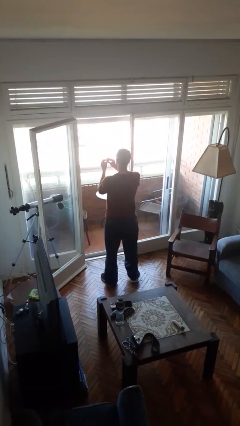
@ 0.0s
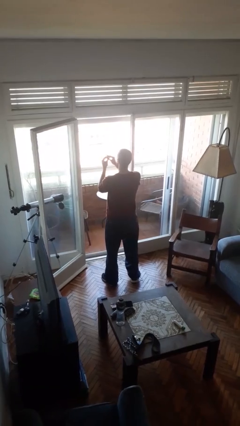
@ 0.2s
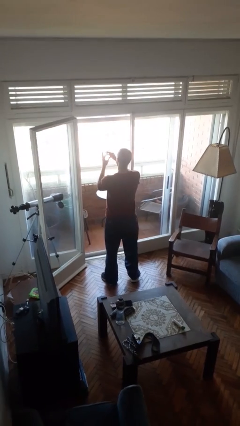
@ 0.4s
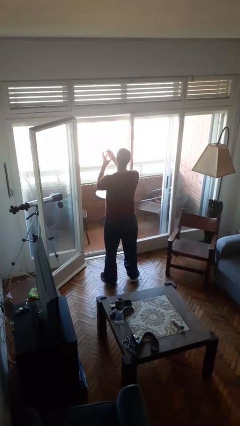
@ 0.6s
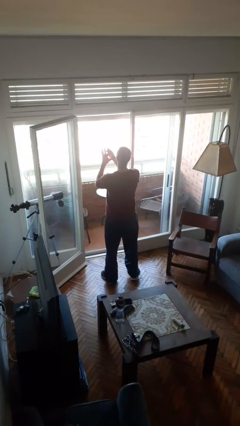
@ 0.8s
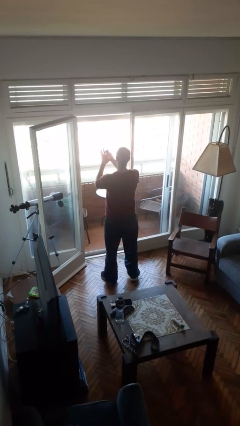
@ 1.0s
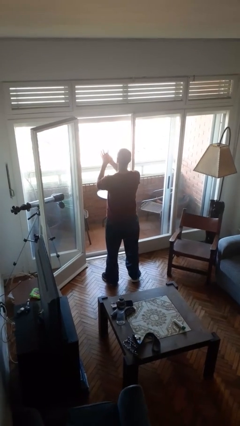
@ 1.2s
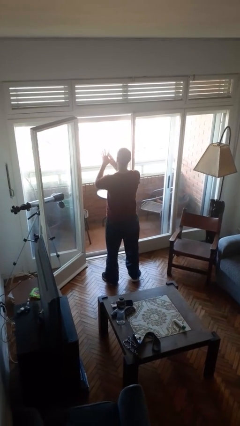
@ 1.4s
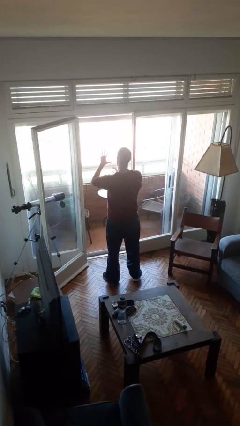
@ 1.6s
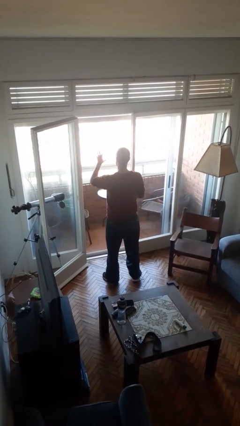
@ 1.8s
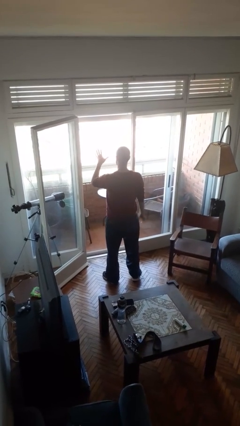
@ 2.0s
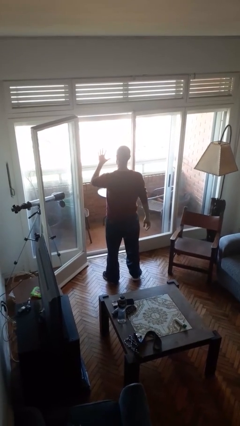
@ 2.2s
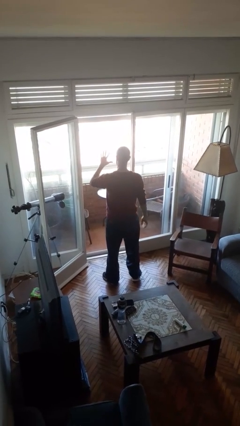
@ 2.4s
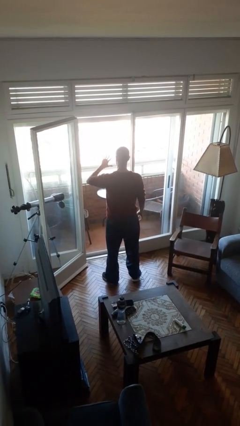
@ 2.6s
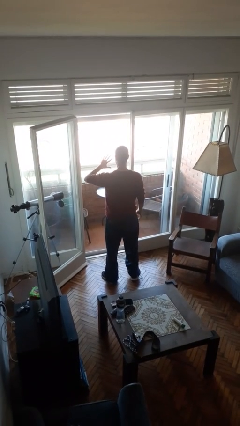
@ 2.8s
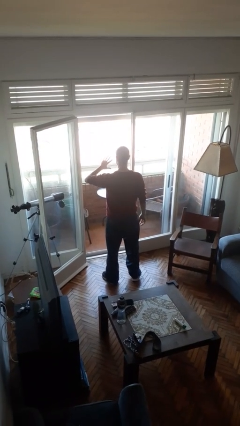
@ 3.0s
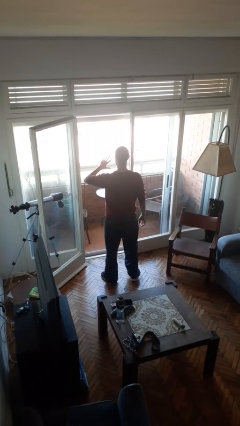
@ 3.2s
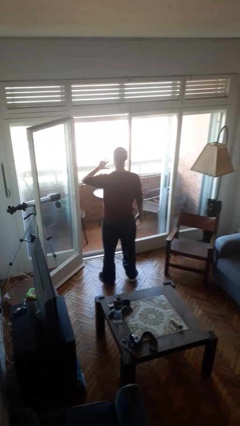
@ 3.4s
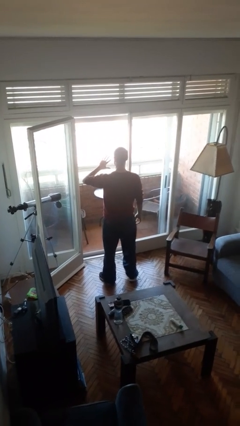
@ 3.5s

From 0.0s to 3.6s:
person puts on ring

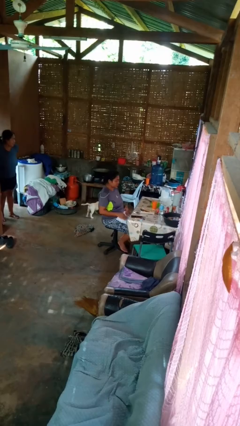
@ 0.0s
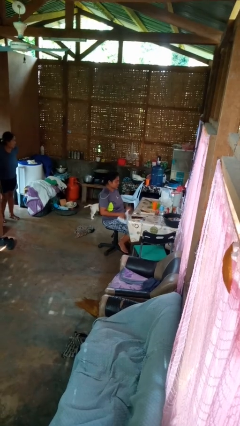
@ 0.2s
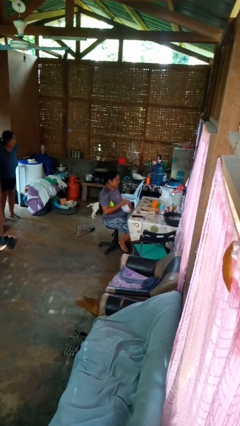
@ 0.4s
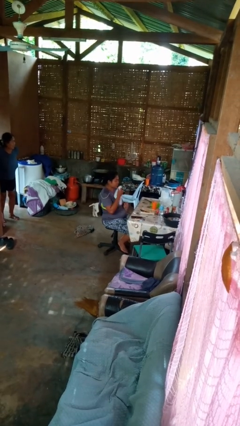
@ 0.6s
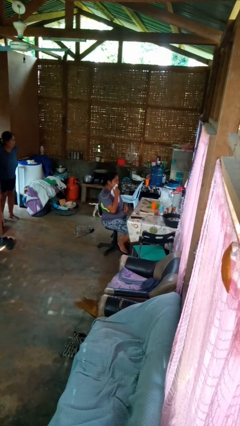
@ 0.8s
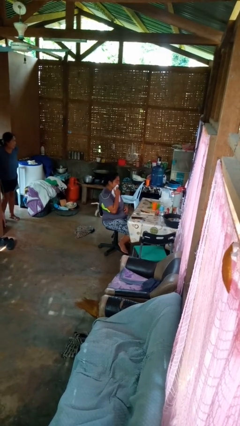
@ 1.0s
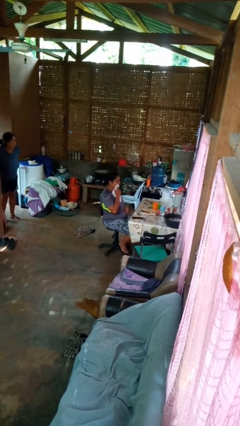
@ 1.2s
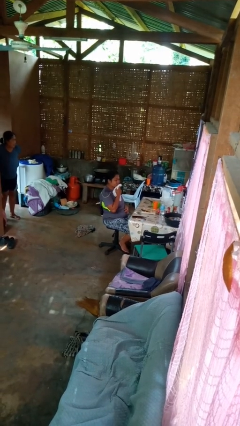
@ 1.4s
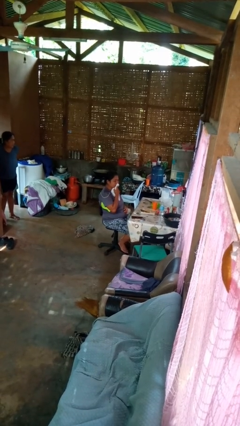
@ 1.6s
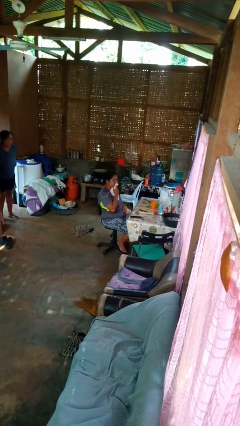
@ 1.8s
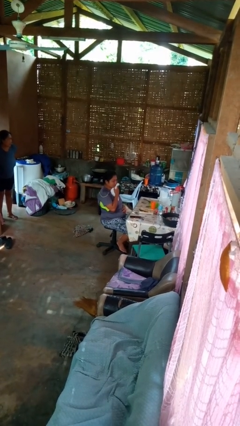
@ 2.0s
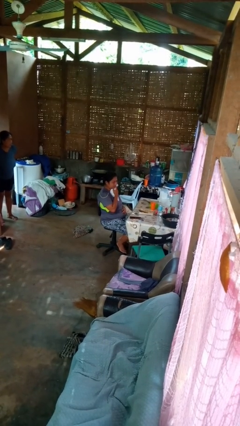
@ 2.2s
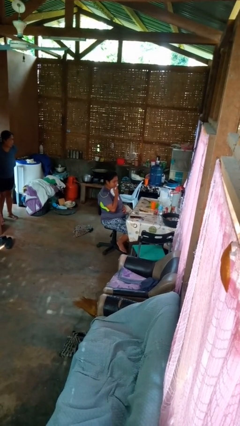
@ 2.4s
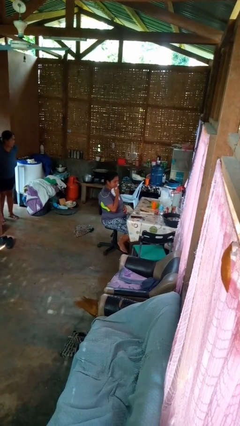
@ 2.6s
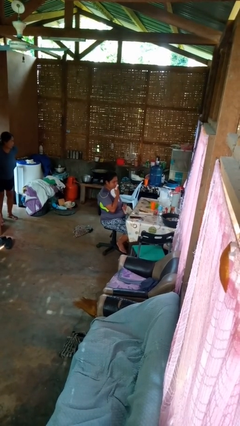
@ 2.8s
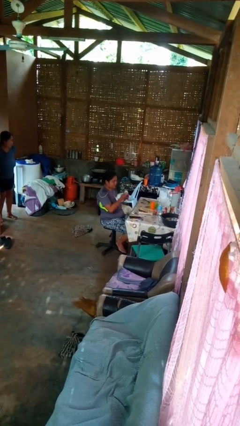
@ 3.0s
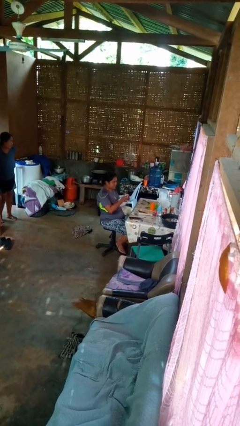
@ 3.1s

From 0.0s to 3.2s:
person wipes mouth with napkin

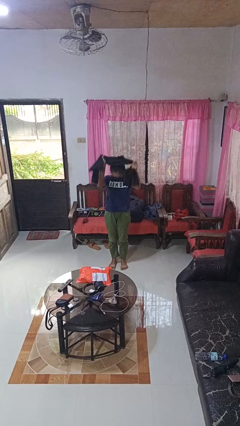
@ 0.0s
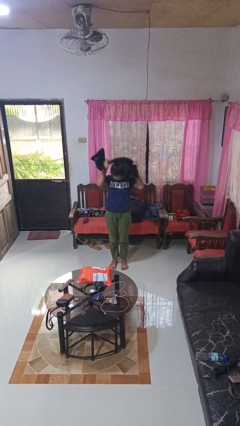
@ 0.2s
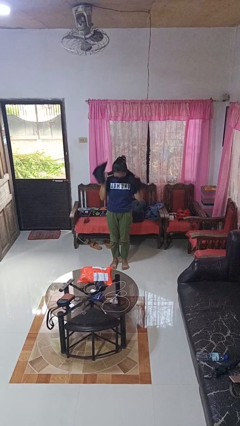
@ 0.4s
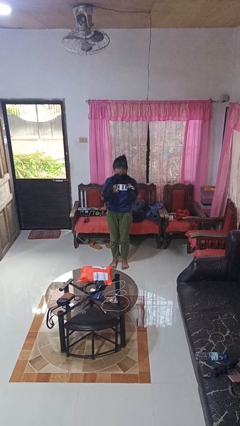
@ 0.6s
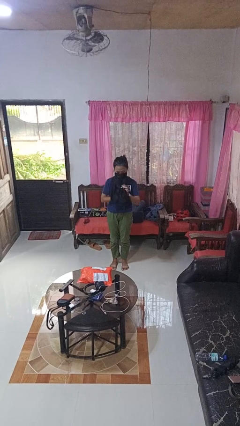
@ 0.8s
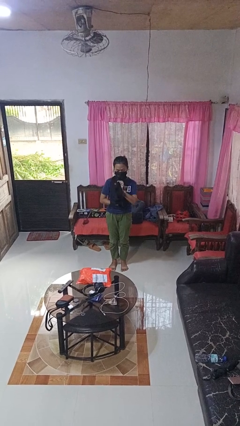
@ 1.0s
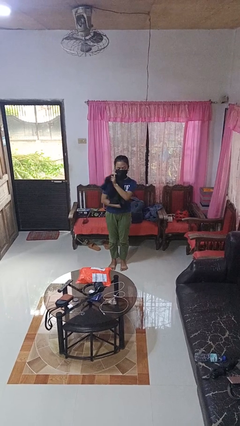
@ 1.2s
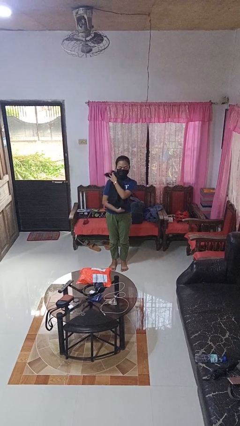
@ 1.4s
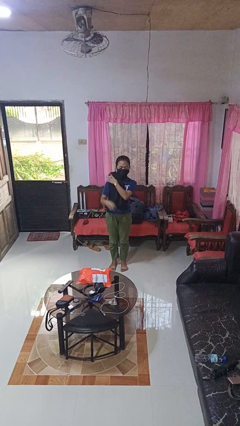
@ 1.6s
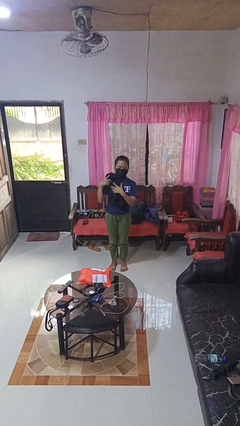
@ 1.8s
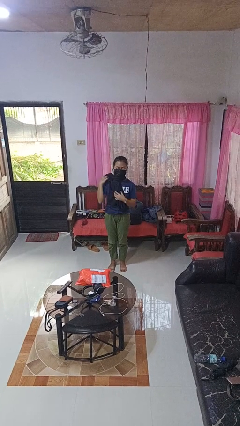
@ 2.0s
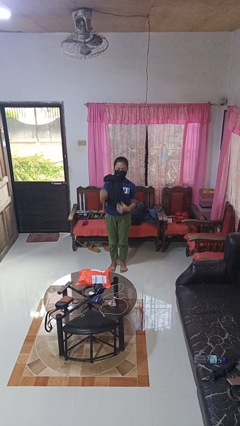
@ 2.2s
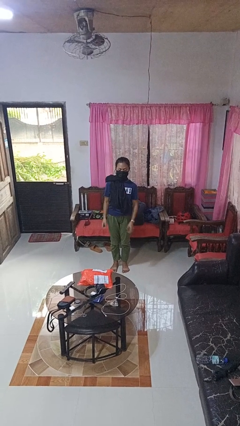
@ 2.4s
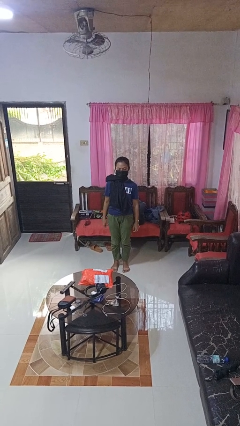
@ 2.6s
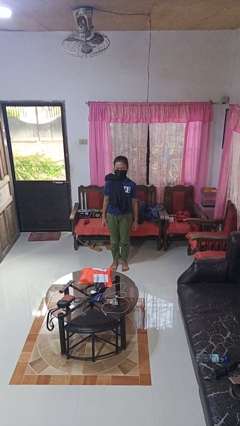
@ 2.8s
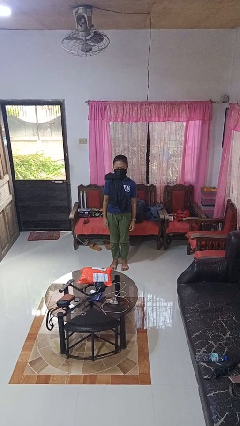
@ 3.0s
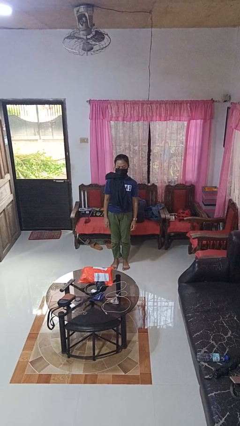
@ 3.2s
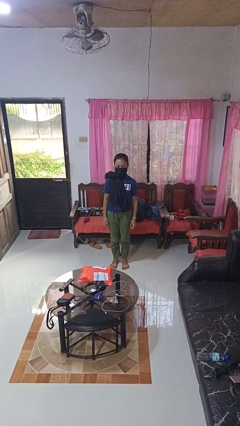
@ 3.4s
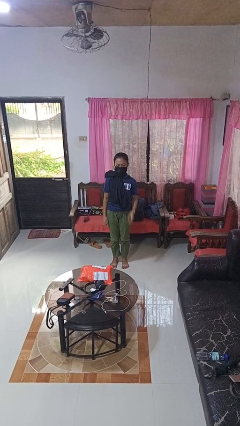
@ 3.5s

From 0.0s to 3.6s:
person puts on scarf

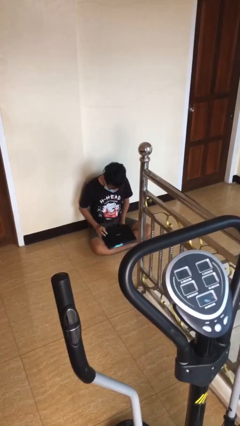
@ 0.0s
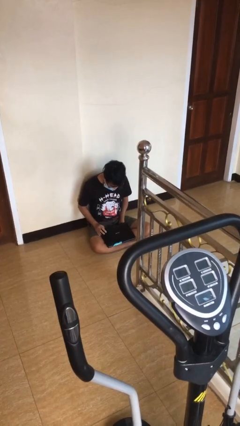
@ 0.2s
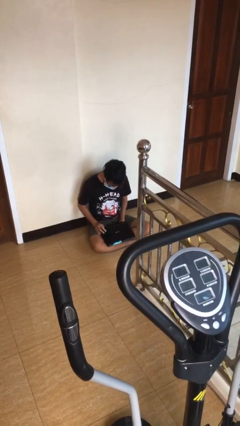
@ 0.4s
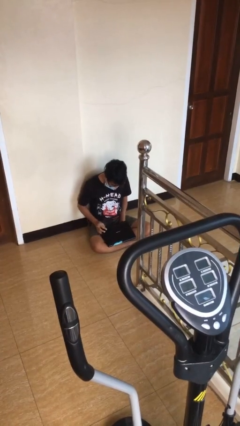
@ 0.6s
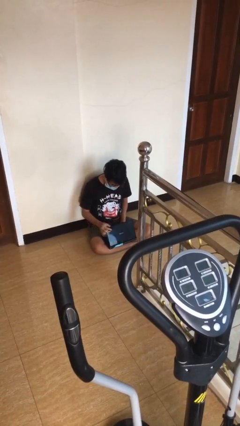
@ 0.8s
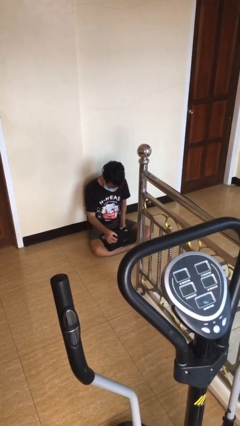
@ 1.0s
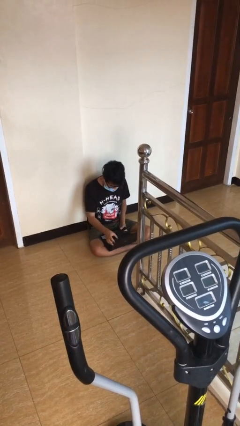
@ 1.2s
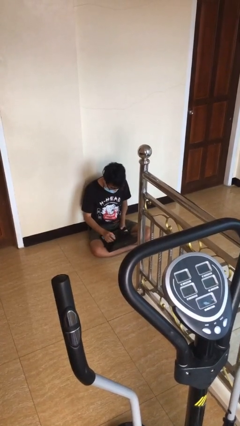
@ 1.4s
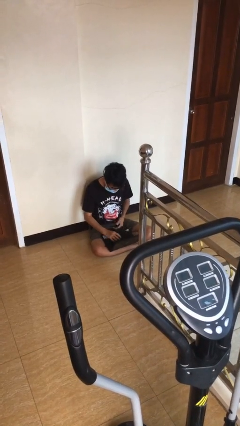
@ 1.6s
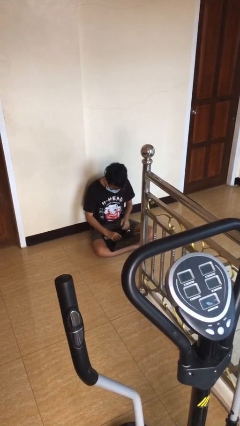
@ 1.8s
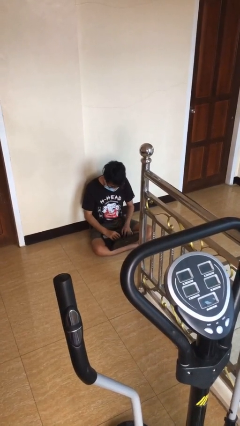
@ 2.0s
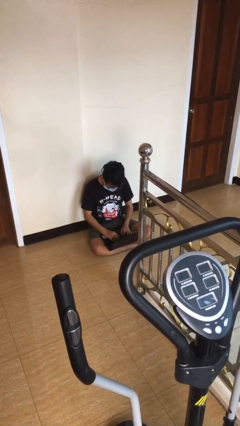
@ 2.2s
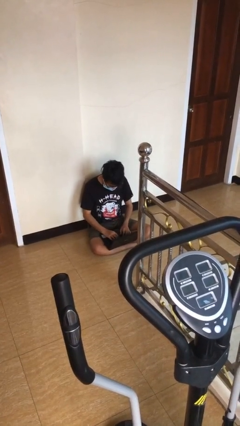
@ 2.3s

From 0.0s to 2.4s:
person interacts with laptop

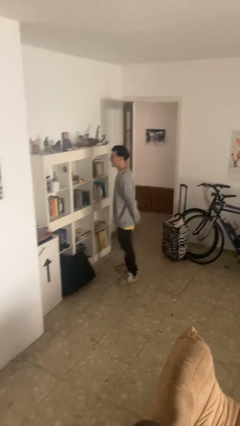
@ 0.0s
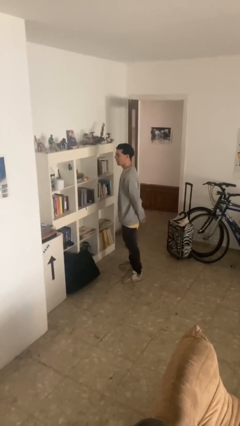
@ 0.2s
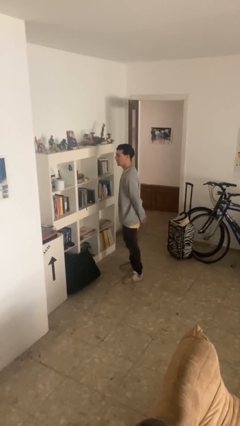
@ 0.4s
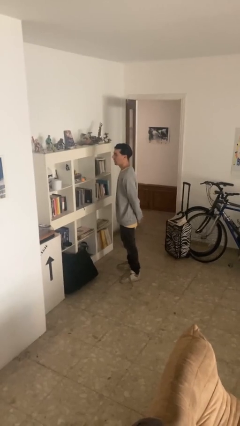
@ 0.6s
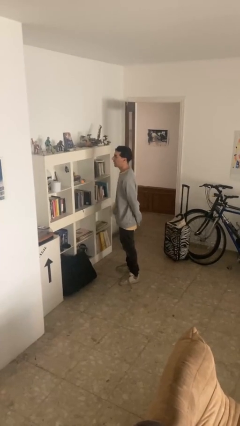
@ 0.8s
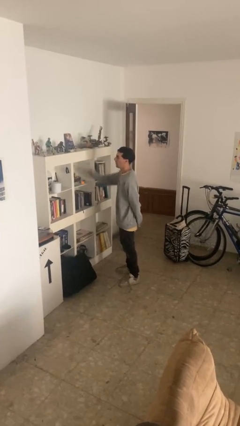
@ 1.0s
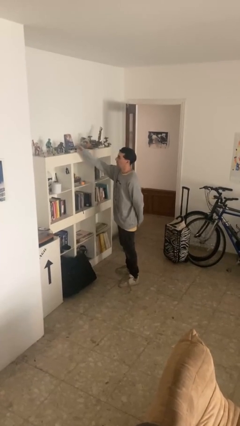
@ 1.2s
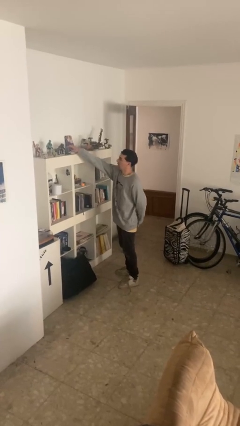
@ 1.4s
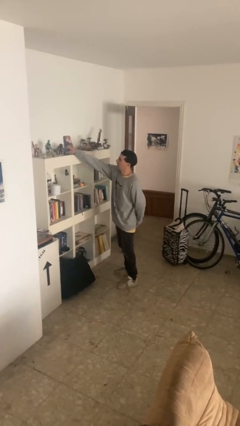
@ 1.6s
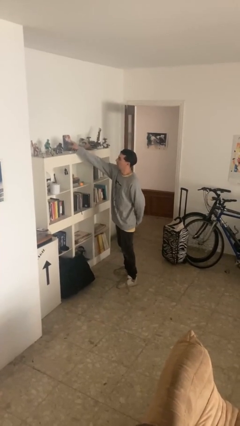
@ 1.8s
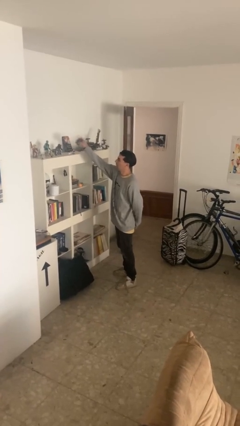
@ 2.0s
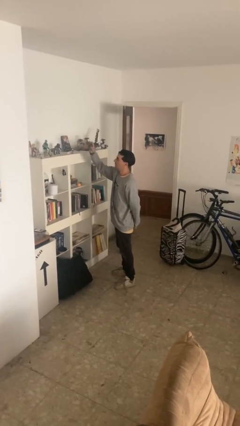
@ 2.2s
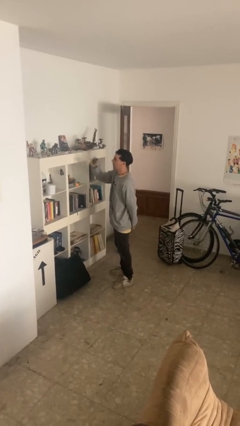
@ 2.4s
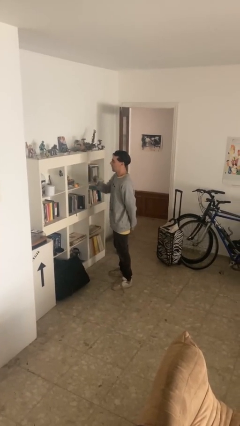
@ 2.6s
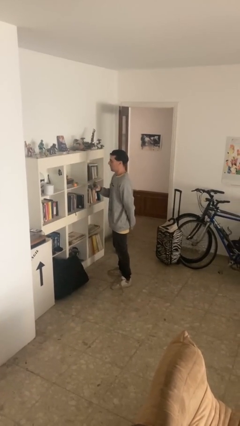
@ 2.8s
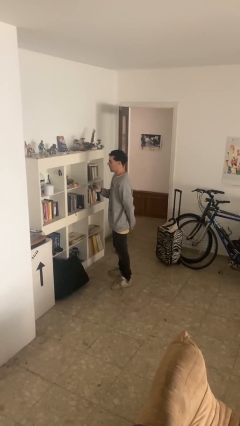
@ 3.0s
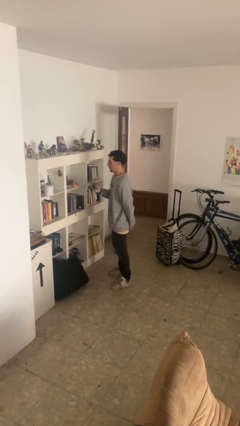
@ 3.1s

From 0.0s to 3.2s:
person picks up object from shelf

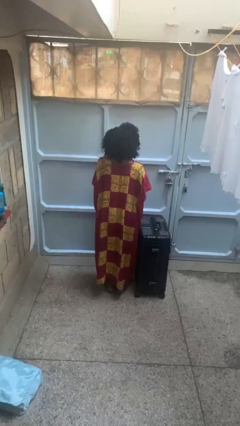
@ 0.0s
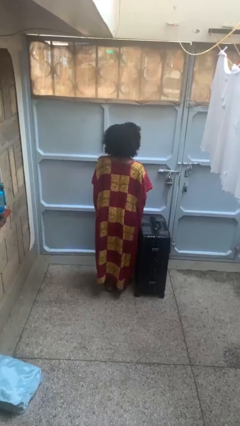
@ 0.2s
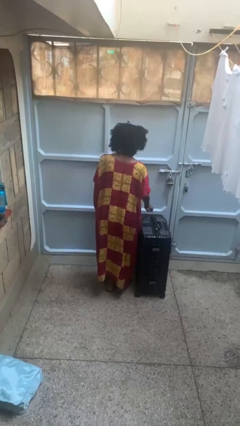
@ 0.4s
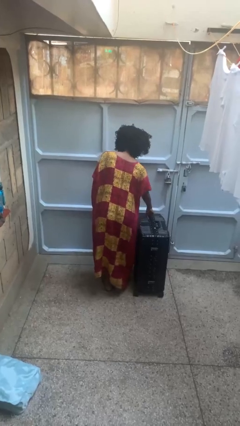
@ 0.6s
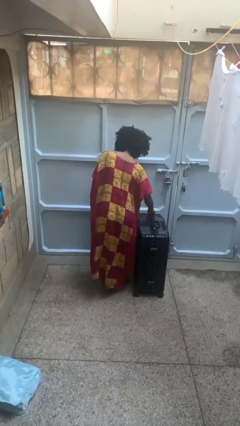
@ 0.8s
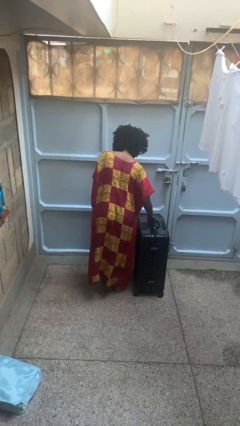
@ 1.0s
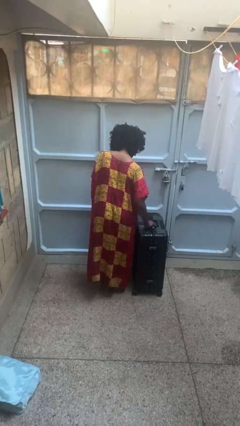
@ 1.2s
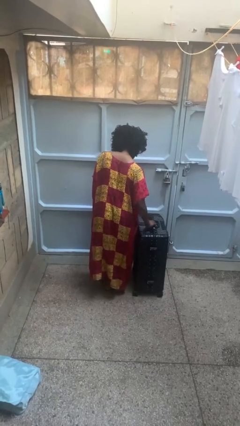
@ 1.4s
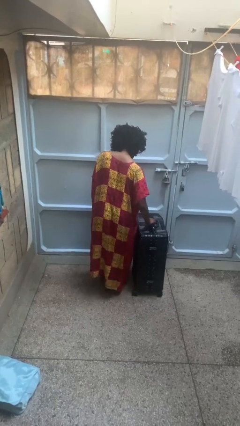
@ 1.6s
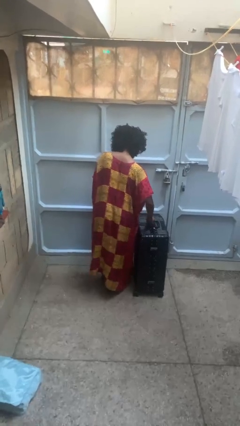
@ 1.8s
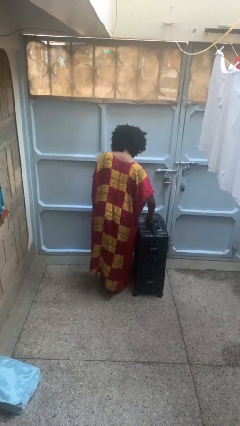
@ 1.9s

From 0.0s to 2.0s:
person opens suitcase
